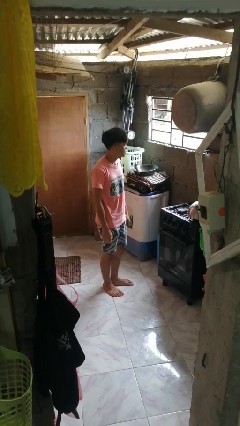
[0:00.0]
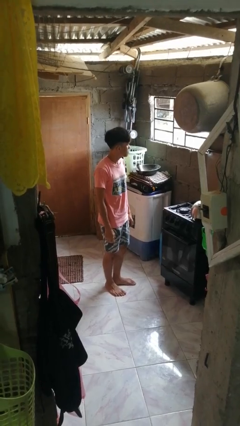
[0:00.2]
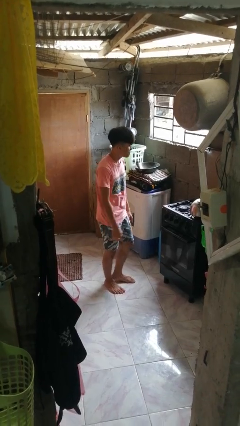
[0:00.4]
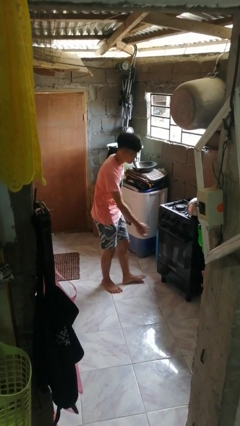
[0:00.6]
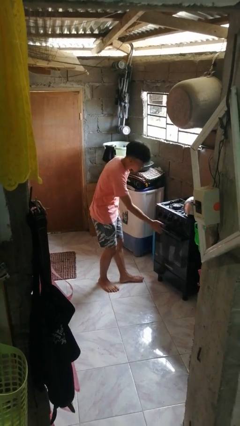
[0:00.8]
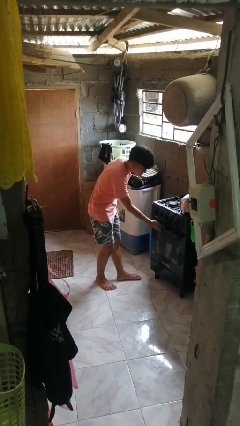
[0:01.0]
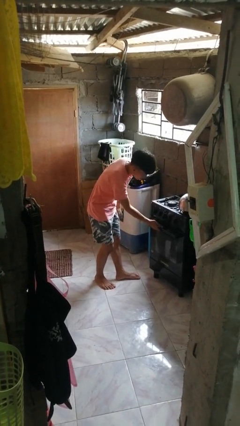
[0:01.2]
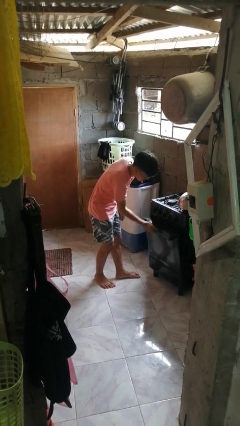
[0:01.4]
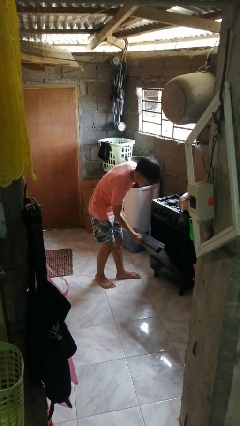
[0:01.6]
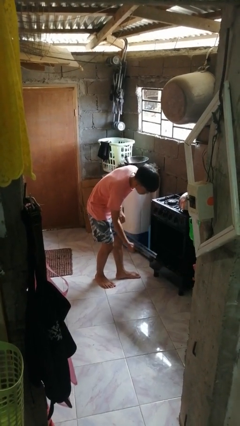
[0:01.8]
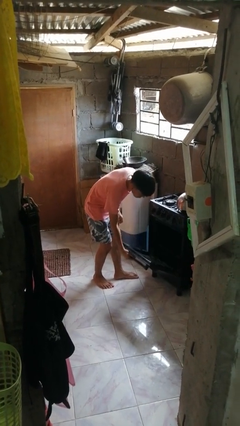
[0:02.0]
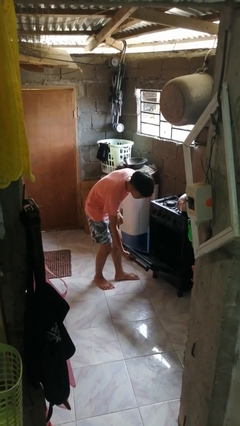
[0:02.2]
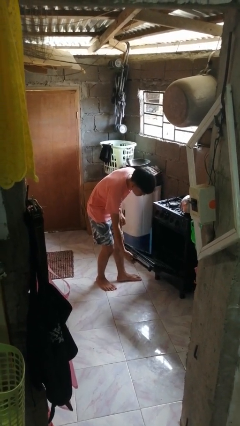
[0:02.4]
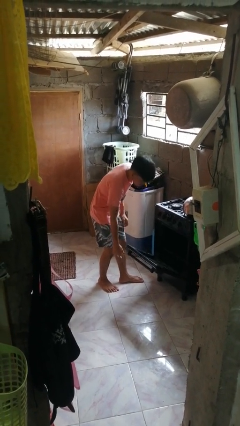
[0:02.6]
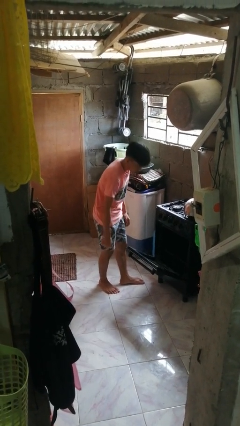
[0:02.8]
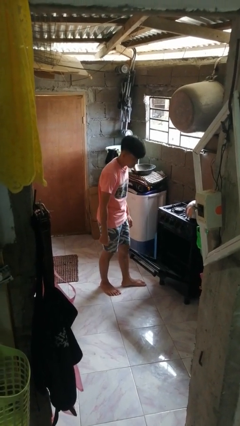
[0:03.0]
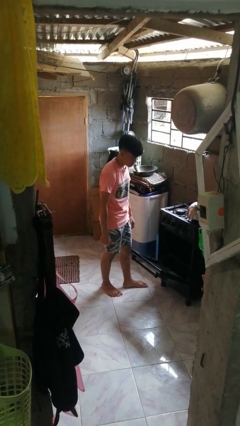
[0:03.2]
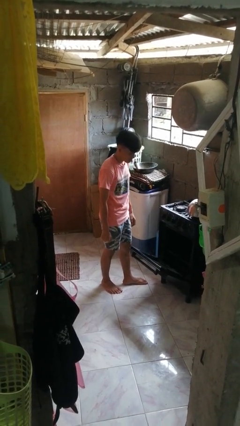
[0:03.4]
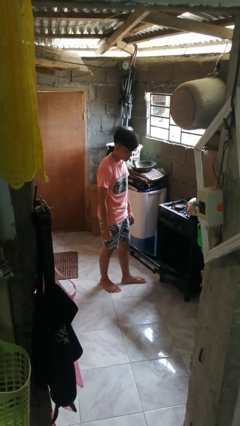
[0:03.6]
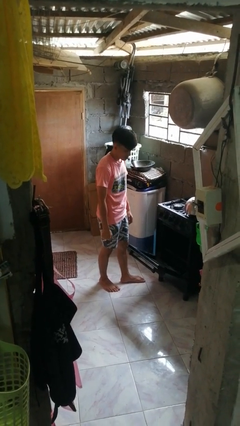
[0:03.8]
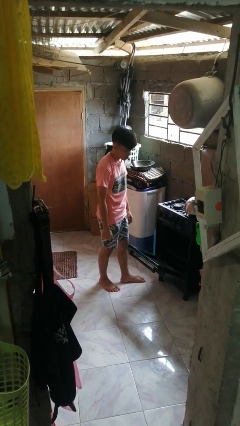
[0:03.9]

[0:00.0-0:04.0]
person opens oven door

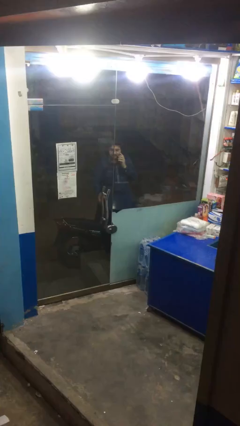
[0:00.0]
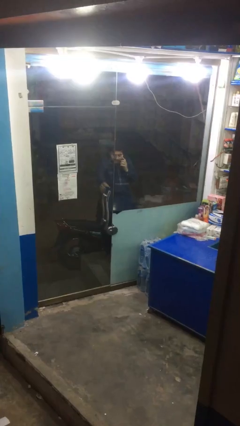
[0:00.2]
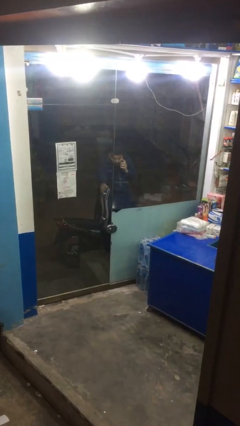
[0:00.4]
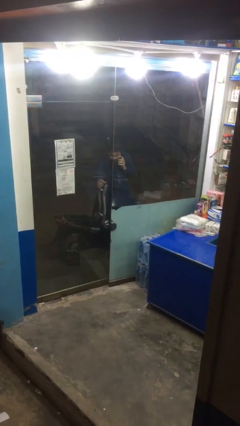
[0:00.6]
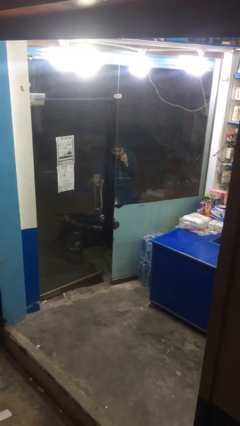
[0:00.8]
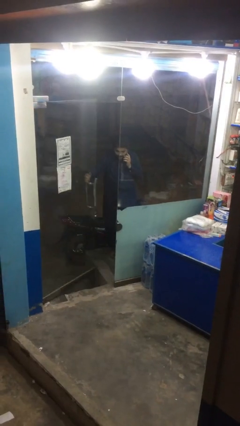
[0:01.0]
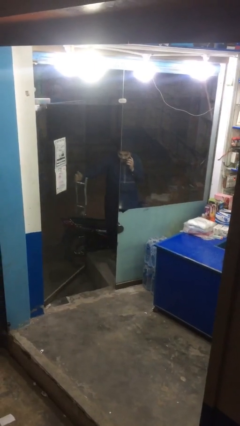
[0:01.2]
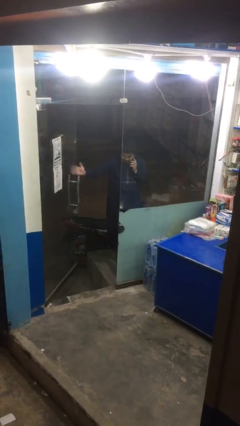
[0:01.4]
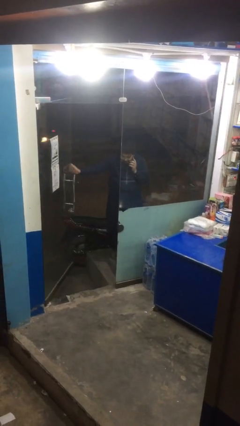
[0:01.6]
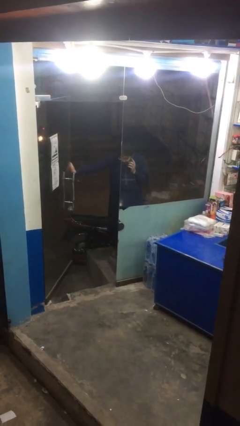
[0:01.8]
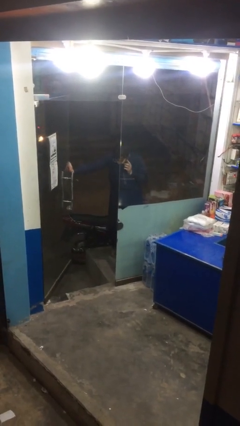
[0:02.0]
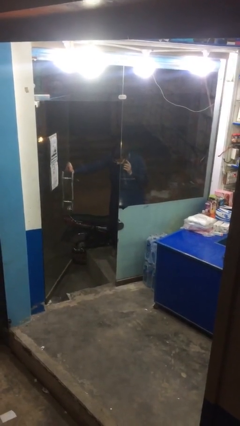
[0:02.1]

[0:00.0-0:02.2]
person opens facility door

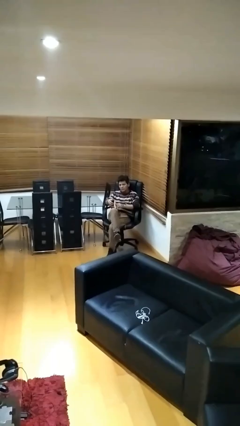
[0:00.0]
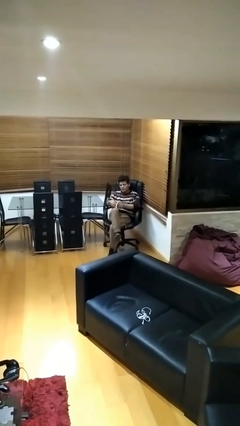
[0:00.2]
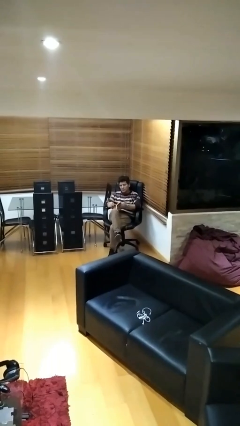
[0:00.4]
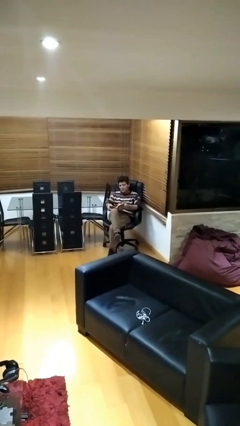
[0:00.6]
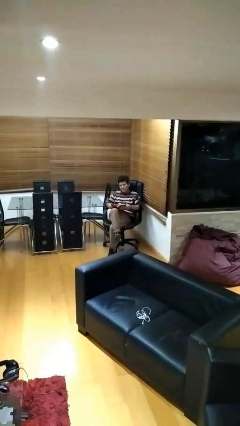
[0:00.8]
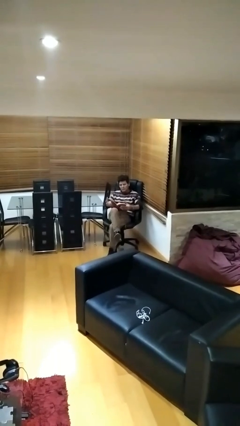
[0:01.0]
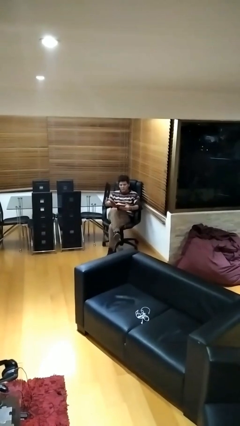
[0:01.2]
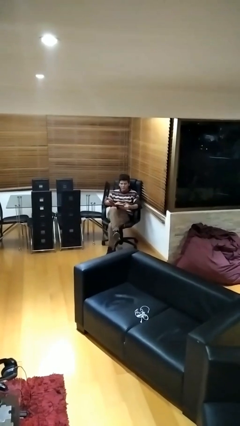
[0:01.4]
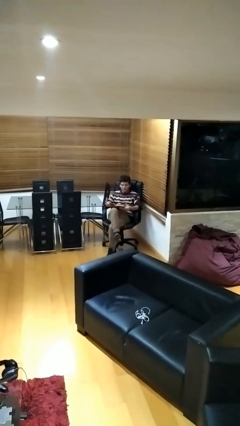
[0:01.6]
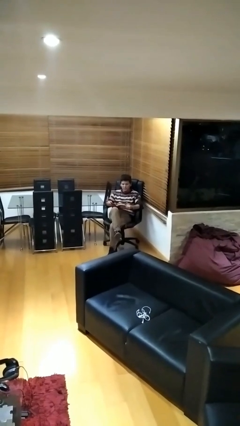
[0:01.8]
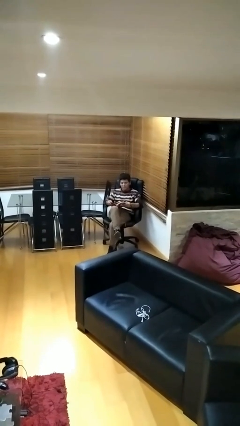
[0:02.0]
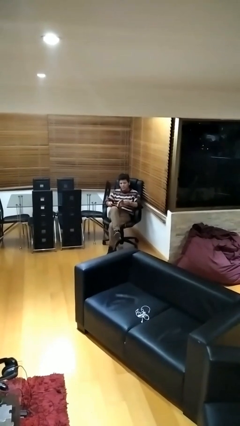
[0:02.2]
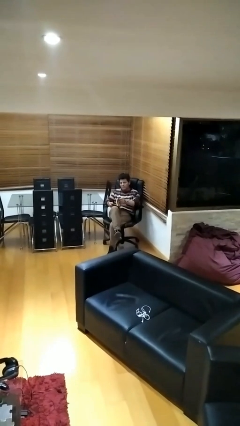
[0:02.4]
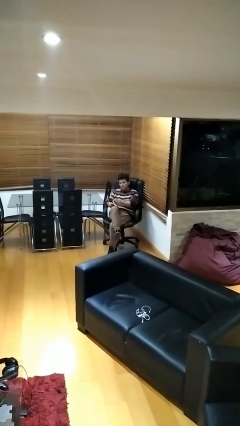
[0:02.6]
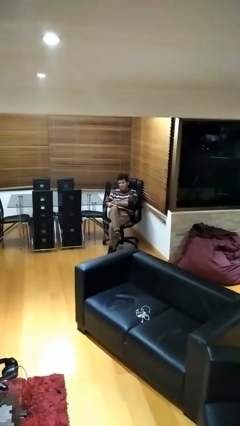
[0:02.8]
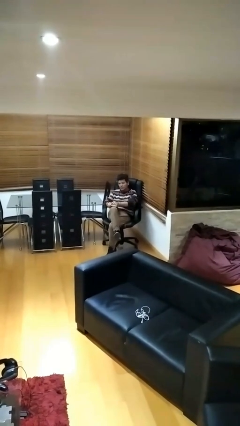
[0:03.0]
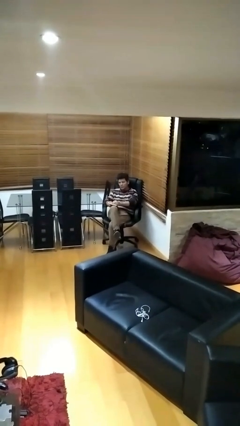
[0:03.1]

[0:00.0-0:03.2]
person reads document

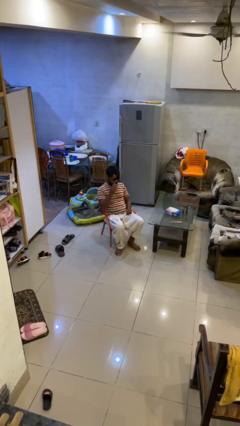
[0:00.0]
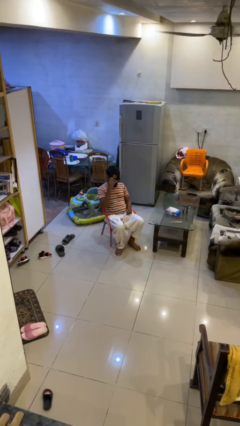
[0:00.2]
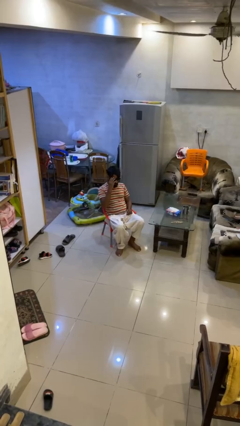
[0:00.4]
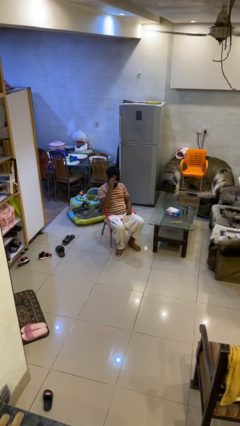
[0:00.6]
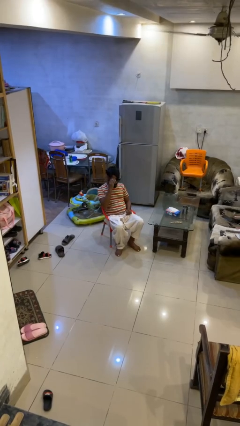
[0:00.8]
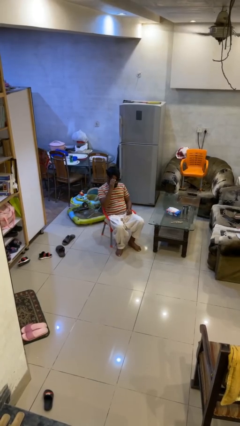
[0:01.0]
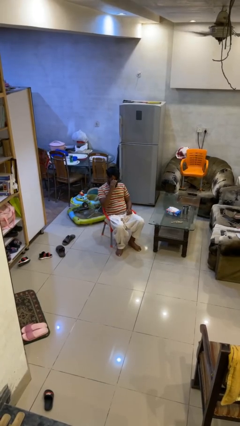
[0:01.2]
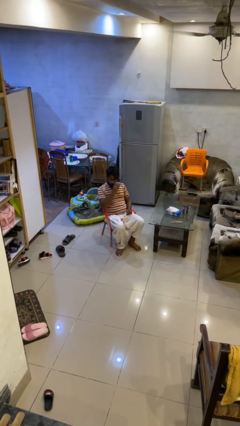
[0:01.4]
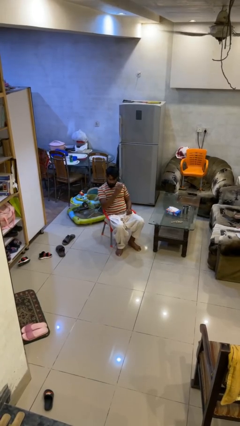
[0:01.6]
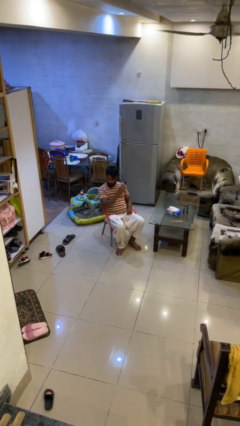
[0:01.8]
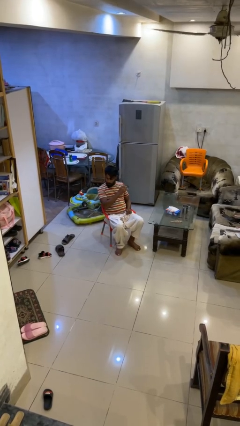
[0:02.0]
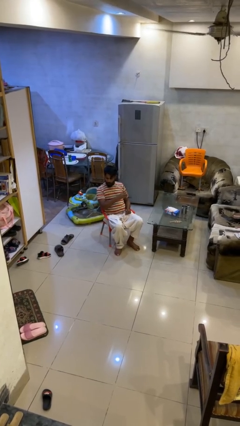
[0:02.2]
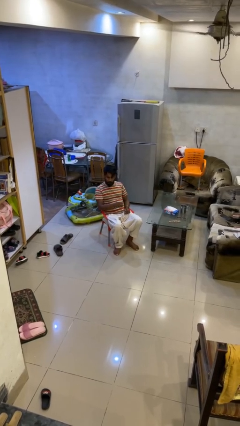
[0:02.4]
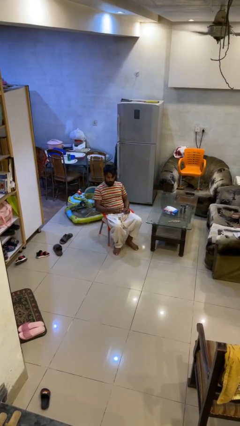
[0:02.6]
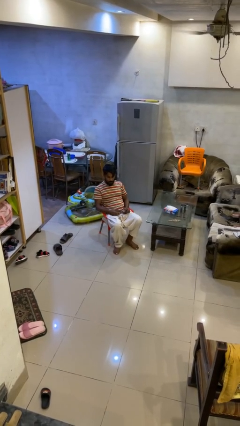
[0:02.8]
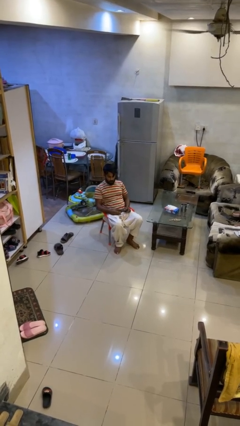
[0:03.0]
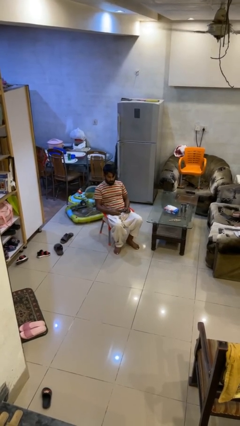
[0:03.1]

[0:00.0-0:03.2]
person takes off sunglasses

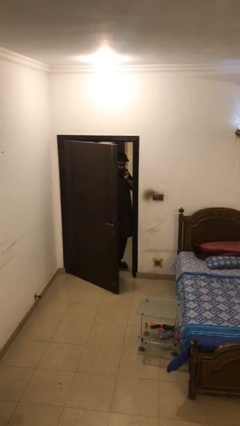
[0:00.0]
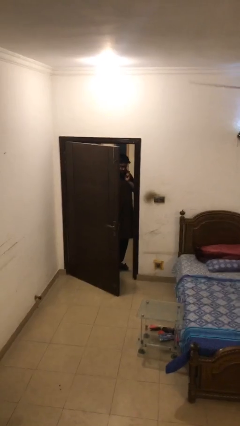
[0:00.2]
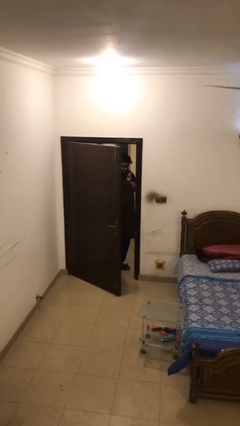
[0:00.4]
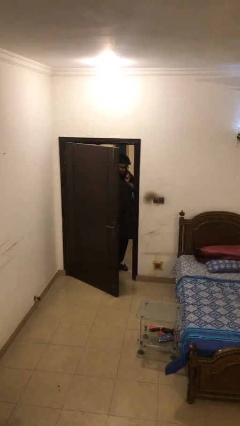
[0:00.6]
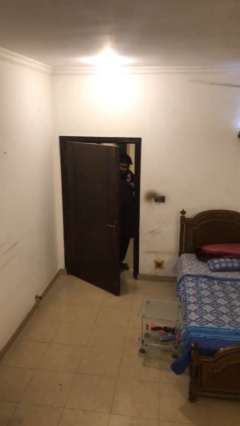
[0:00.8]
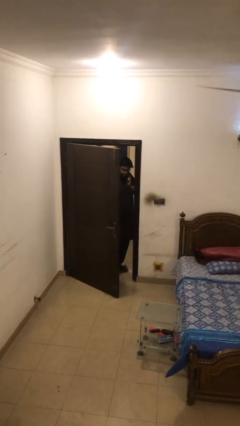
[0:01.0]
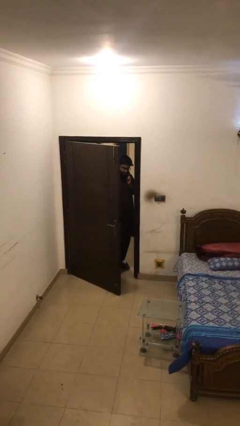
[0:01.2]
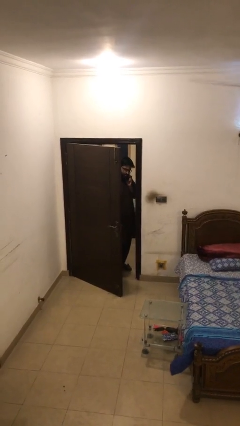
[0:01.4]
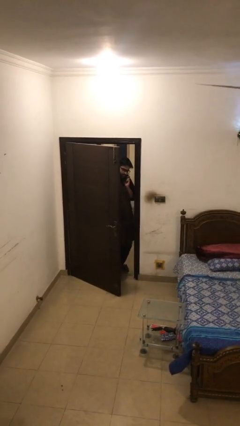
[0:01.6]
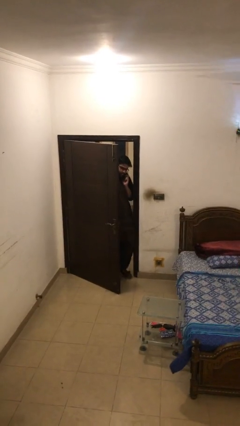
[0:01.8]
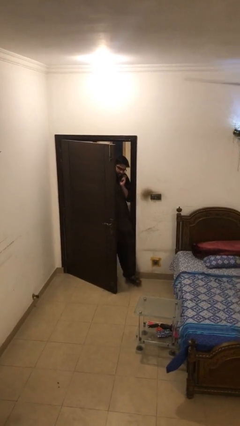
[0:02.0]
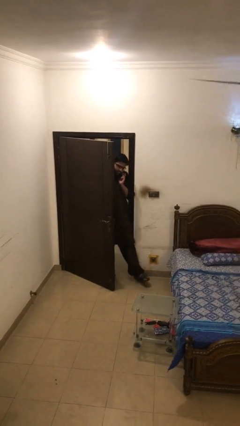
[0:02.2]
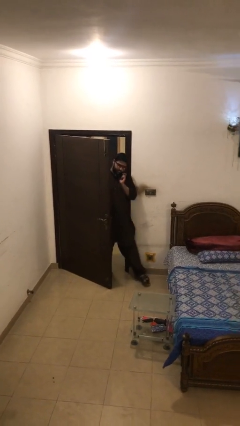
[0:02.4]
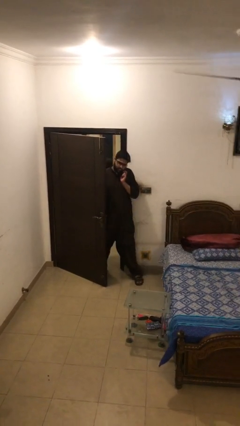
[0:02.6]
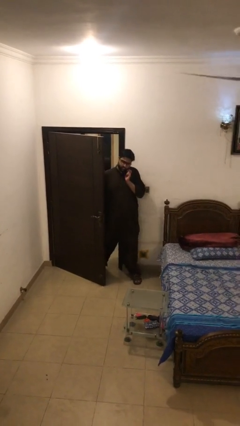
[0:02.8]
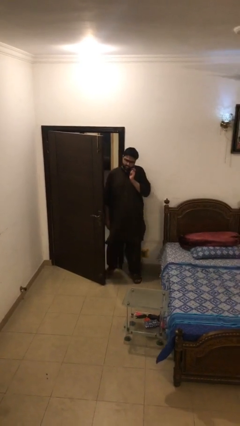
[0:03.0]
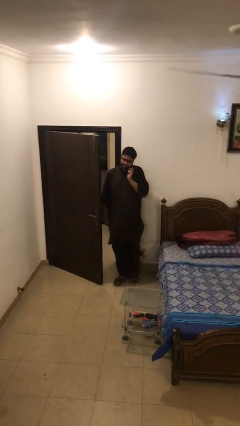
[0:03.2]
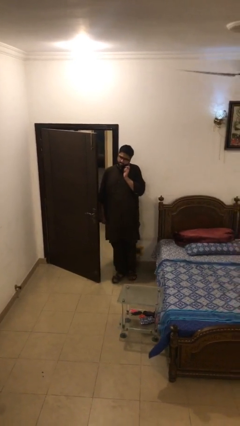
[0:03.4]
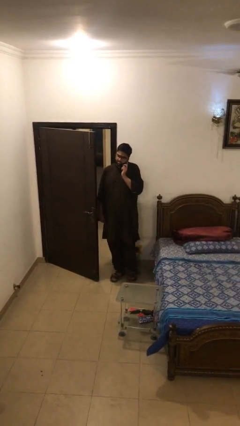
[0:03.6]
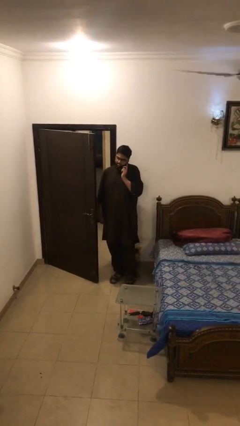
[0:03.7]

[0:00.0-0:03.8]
person enters scene through structure

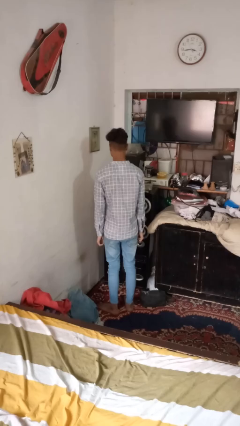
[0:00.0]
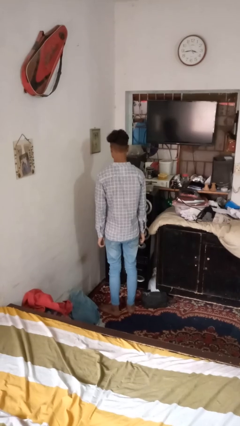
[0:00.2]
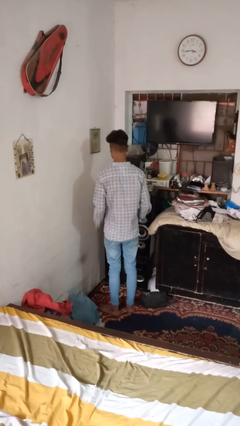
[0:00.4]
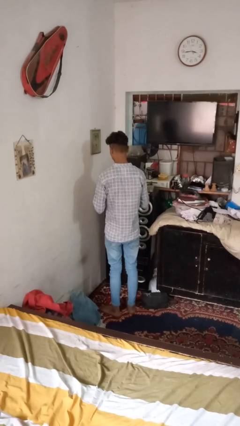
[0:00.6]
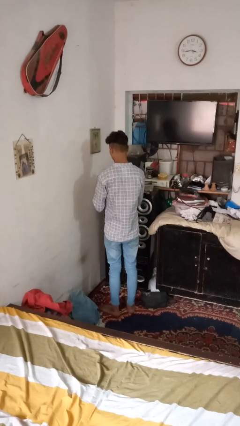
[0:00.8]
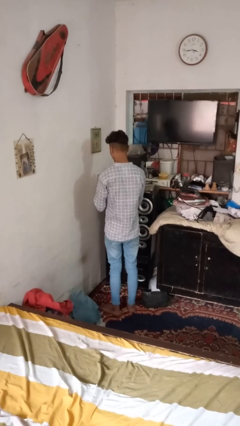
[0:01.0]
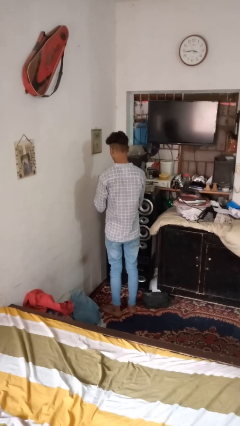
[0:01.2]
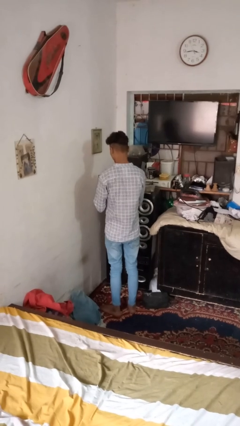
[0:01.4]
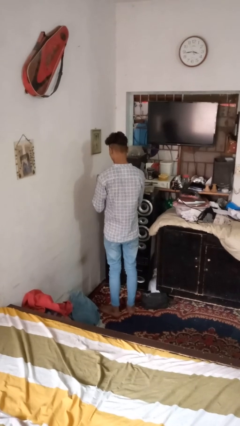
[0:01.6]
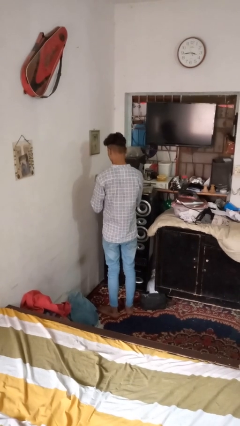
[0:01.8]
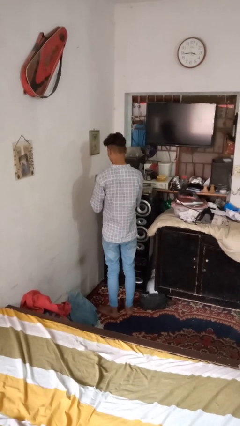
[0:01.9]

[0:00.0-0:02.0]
person clips fingernails
